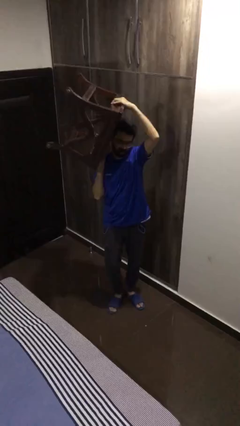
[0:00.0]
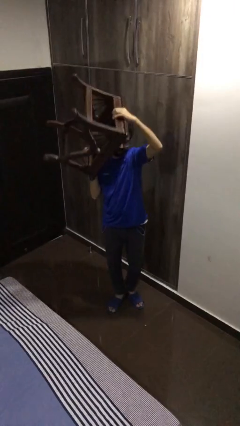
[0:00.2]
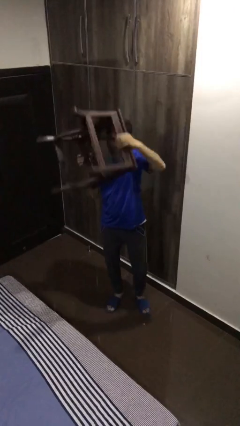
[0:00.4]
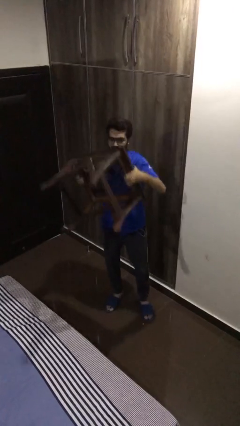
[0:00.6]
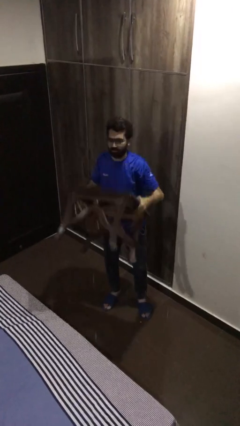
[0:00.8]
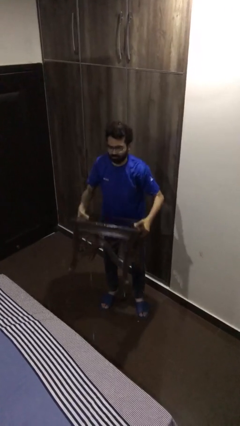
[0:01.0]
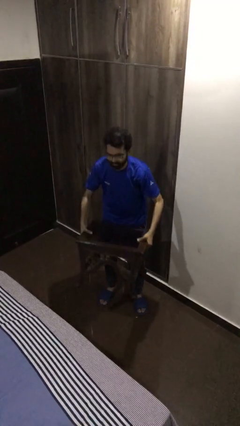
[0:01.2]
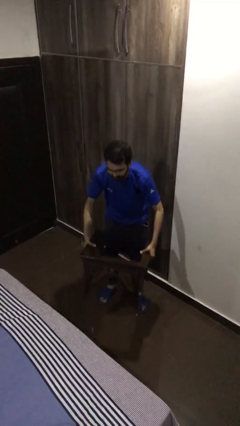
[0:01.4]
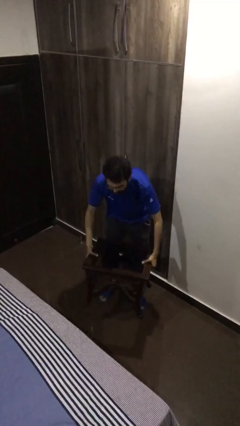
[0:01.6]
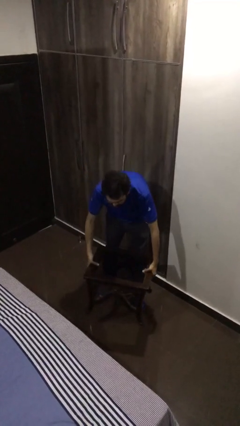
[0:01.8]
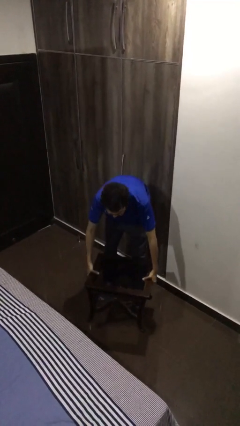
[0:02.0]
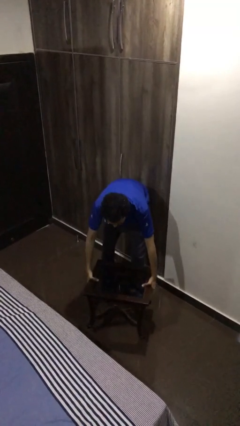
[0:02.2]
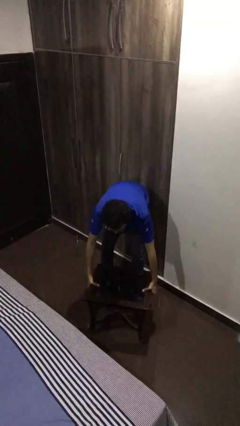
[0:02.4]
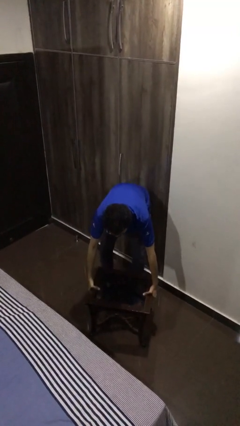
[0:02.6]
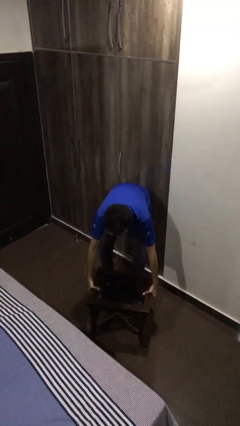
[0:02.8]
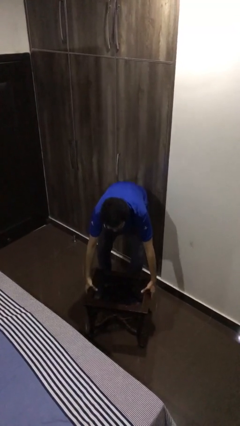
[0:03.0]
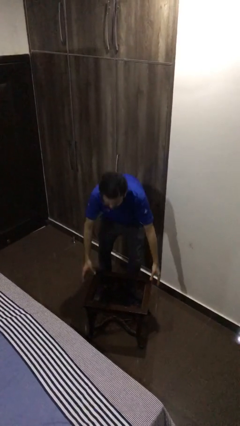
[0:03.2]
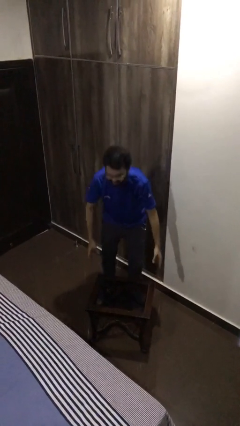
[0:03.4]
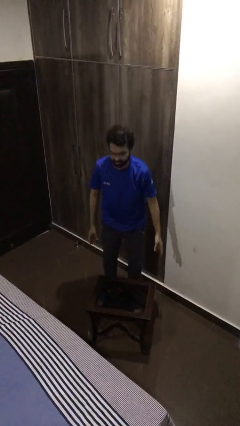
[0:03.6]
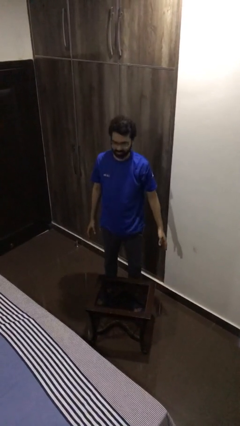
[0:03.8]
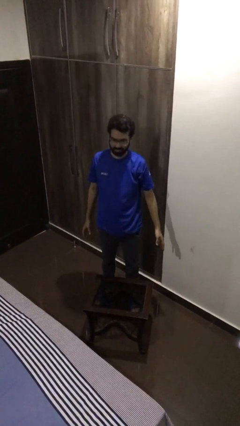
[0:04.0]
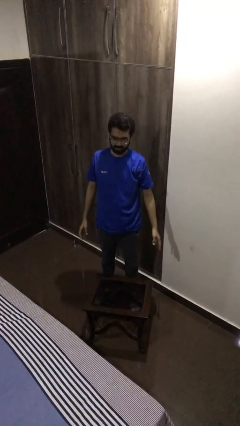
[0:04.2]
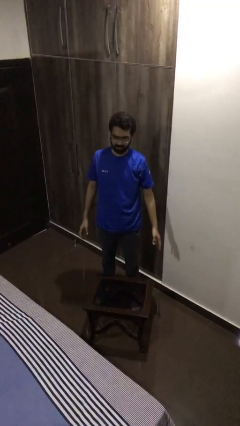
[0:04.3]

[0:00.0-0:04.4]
person puts down object on floor

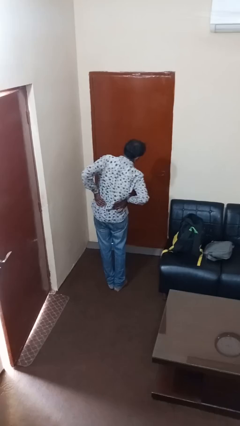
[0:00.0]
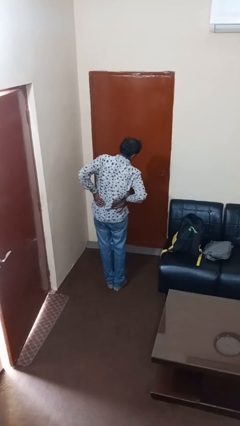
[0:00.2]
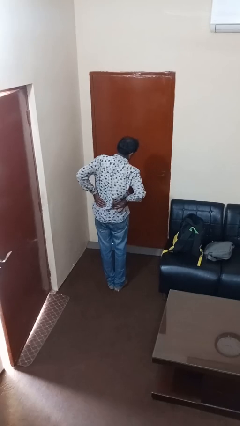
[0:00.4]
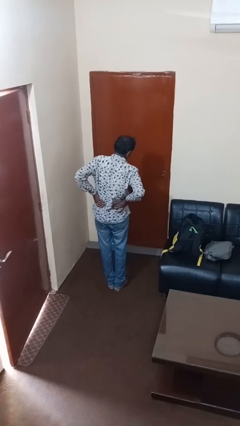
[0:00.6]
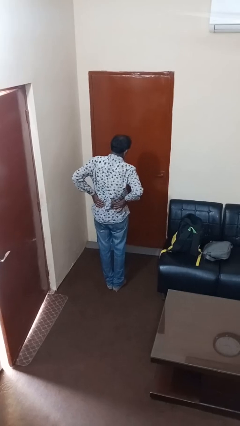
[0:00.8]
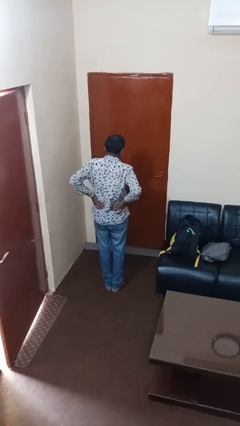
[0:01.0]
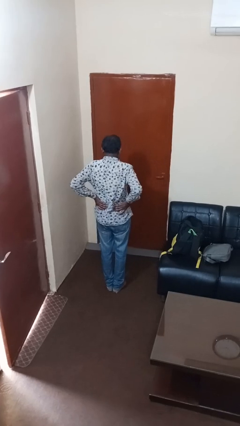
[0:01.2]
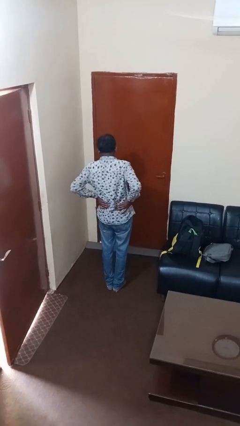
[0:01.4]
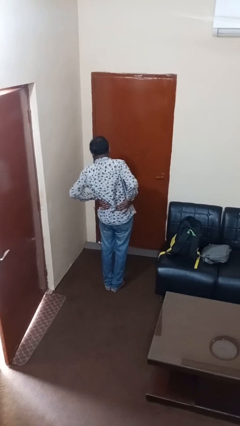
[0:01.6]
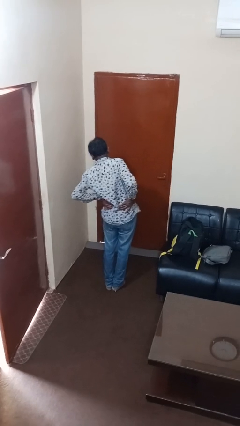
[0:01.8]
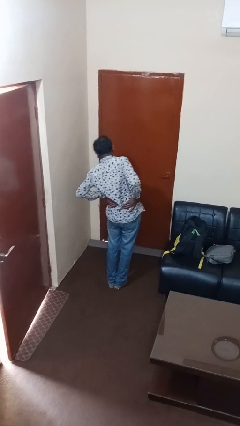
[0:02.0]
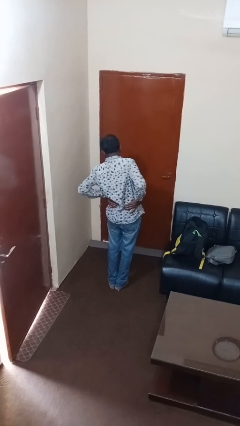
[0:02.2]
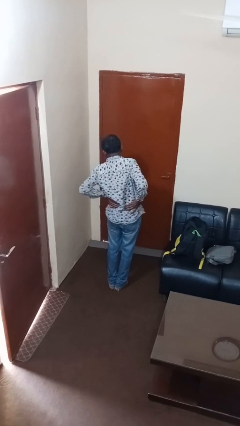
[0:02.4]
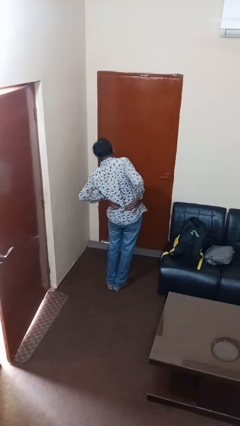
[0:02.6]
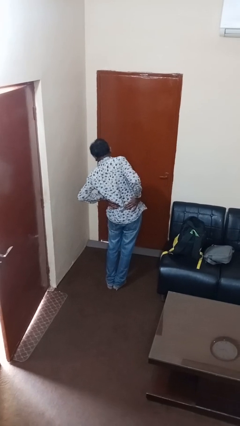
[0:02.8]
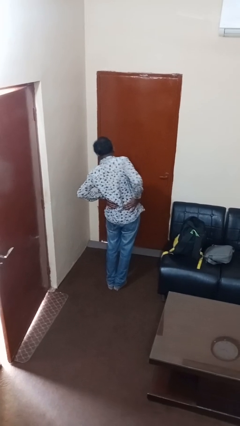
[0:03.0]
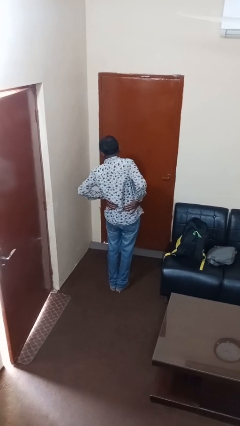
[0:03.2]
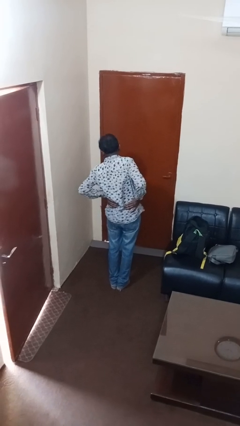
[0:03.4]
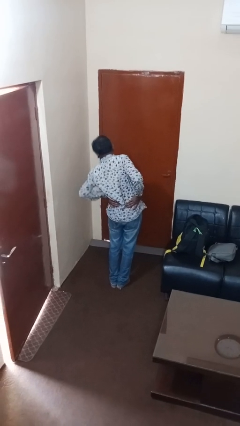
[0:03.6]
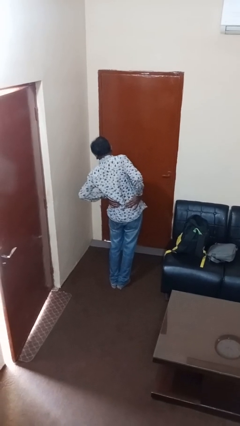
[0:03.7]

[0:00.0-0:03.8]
person stretches arms over head

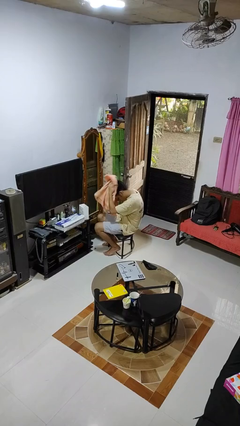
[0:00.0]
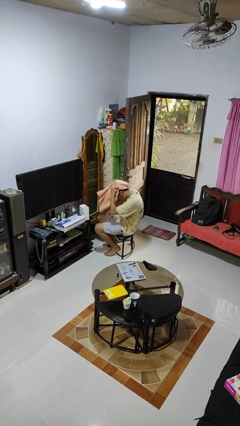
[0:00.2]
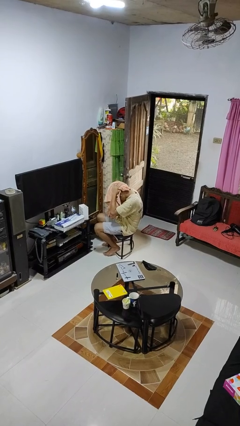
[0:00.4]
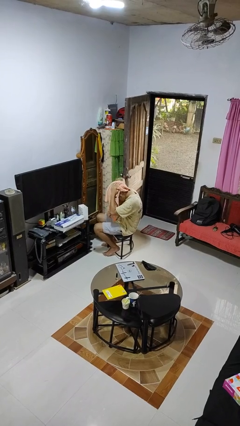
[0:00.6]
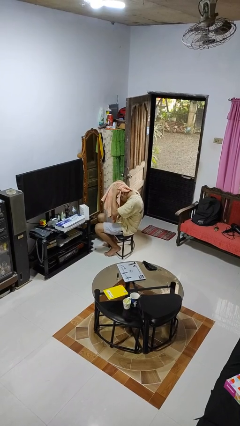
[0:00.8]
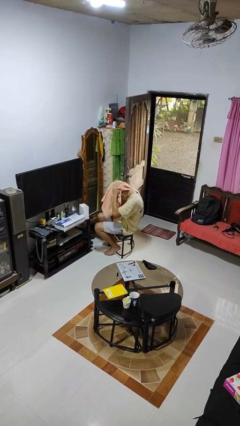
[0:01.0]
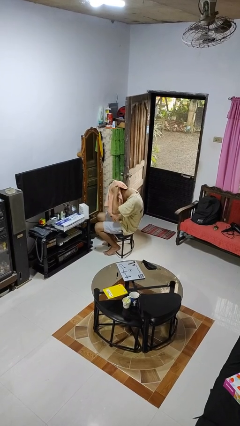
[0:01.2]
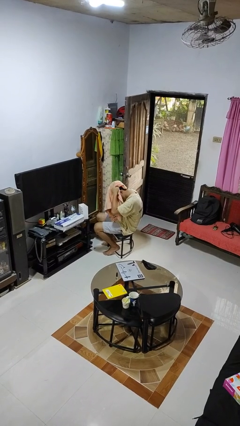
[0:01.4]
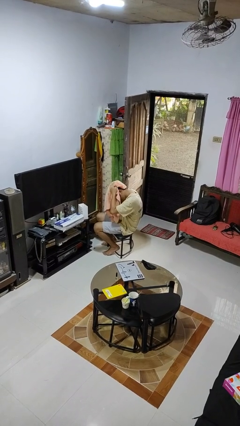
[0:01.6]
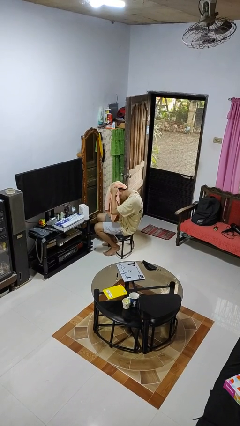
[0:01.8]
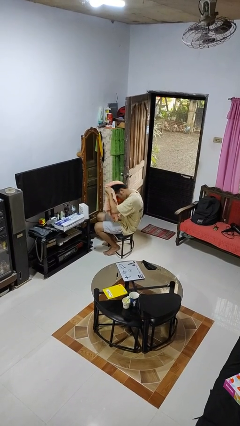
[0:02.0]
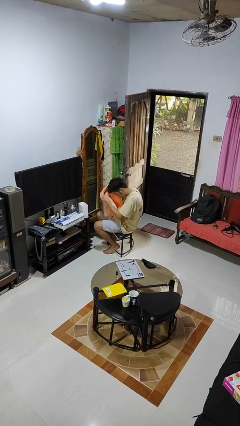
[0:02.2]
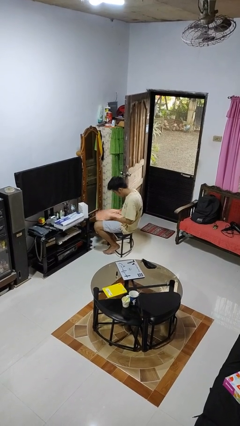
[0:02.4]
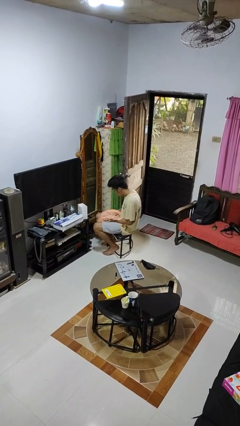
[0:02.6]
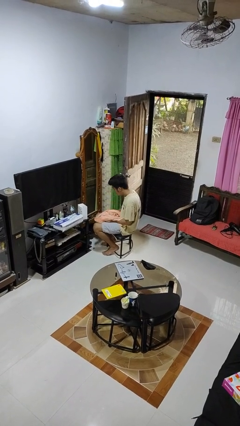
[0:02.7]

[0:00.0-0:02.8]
person dries hair with towel

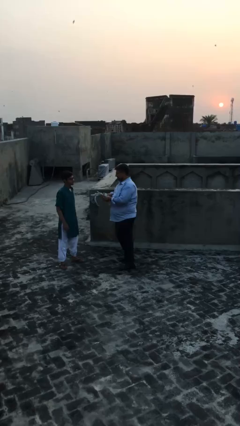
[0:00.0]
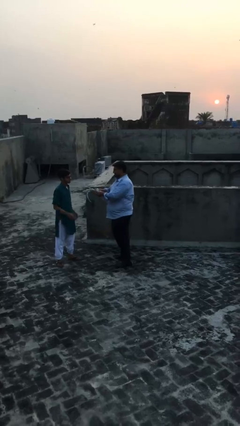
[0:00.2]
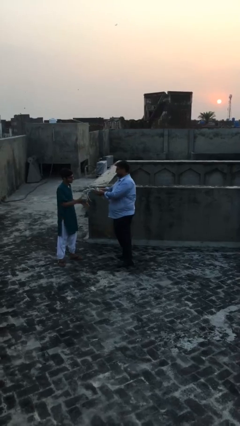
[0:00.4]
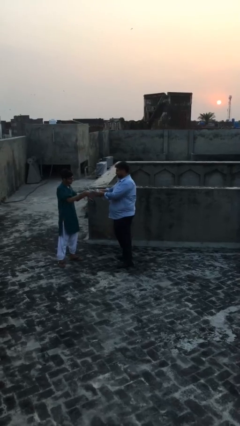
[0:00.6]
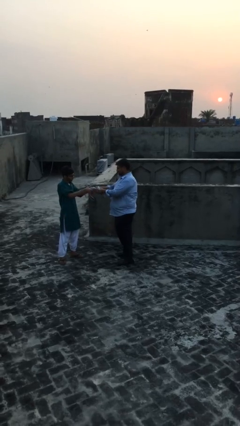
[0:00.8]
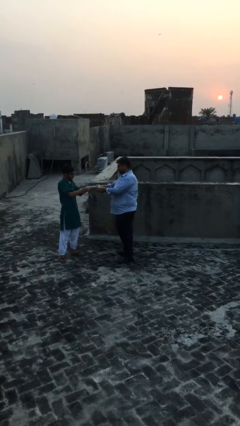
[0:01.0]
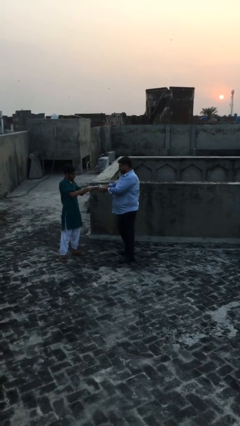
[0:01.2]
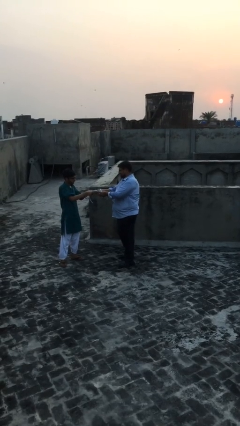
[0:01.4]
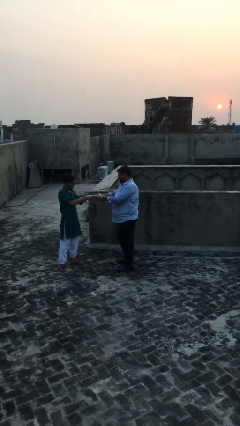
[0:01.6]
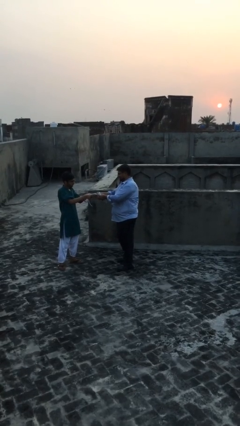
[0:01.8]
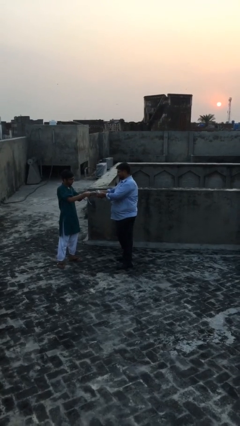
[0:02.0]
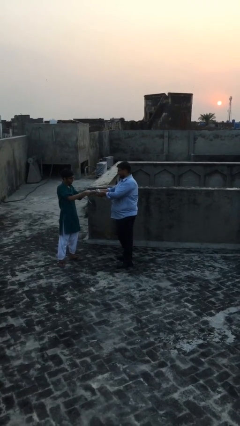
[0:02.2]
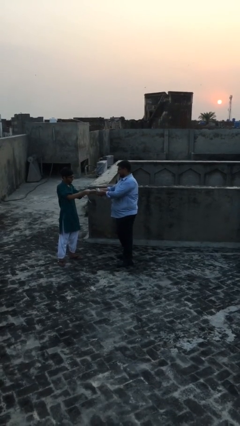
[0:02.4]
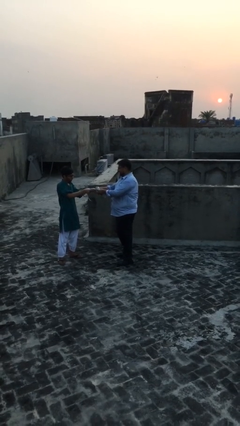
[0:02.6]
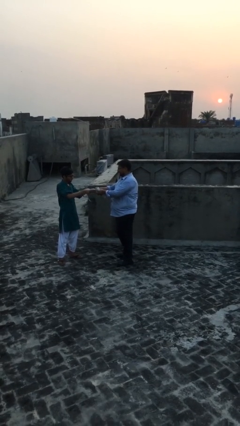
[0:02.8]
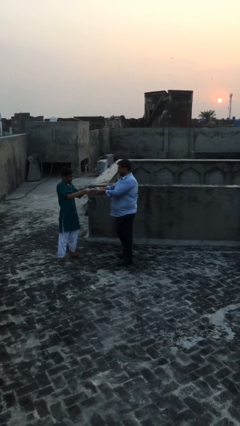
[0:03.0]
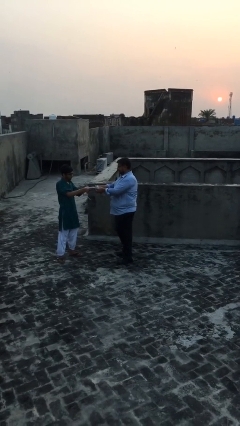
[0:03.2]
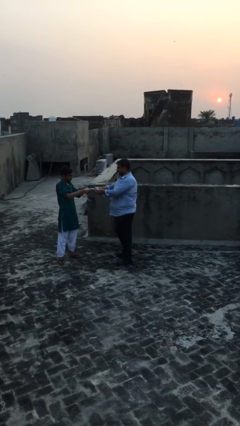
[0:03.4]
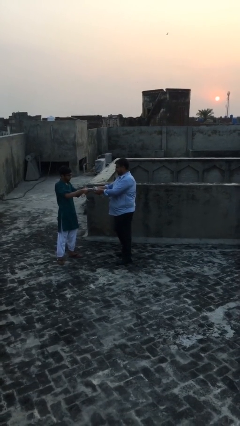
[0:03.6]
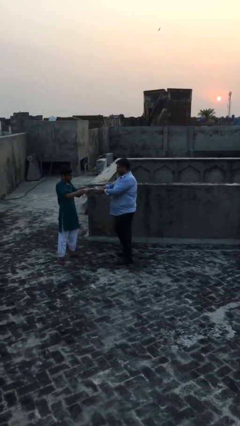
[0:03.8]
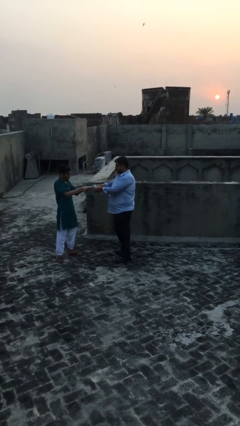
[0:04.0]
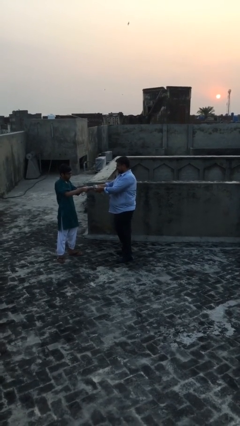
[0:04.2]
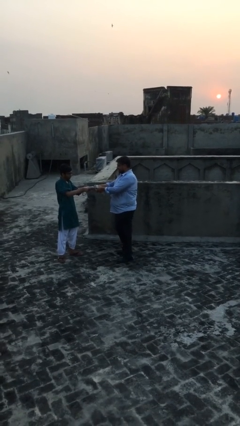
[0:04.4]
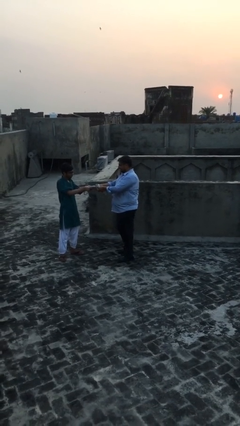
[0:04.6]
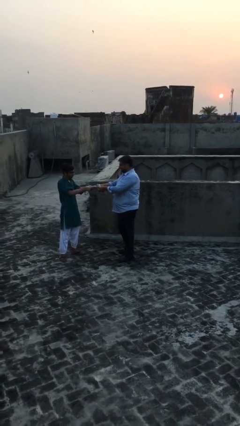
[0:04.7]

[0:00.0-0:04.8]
person transfers object to person

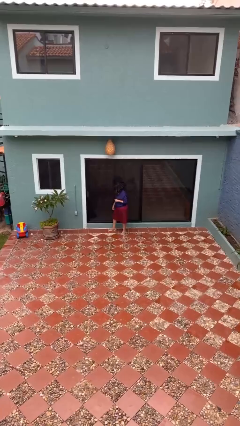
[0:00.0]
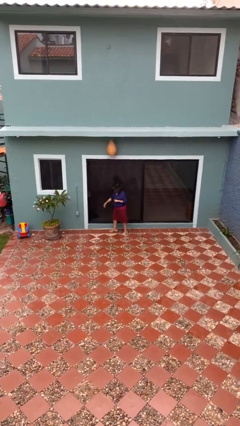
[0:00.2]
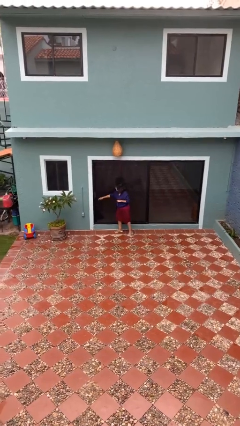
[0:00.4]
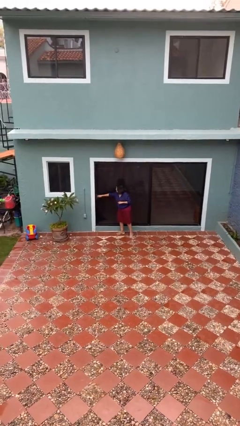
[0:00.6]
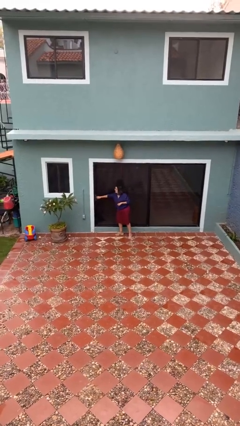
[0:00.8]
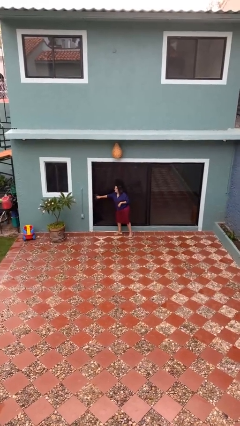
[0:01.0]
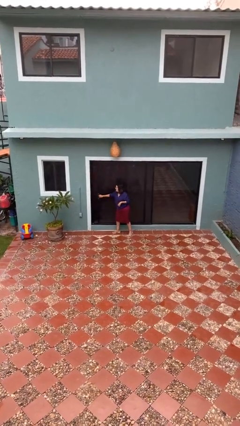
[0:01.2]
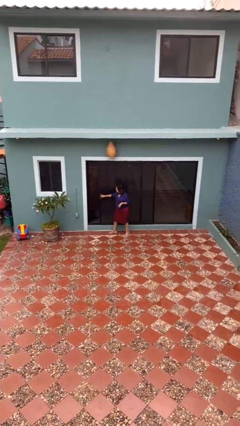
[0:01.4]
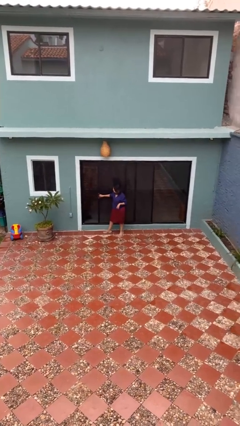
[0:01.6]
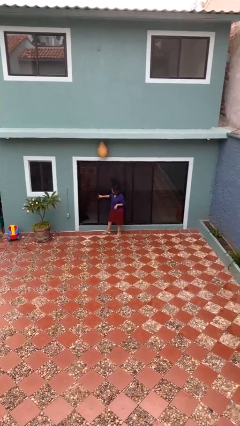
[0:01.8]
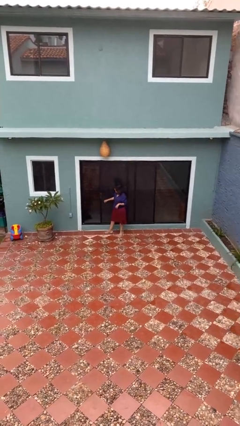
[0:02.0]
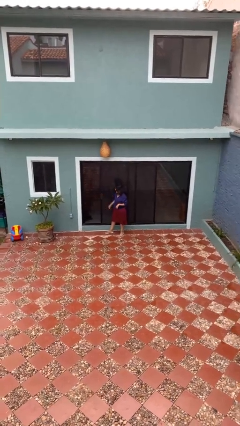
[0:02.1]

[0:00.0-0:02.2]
person opens sliding door
